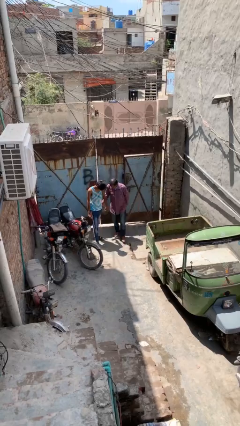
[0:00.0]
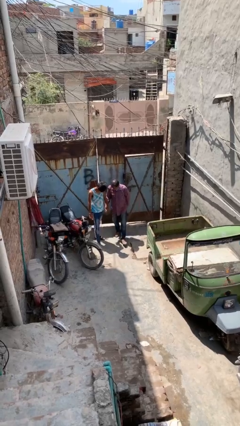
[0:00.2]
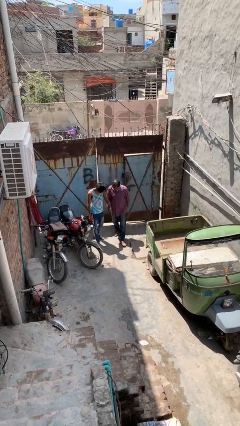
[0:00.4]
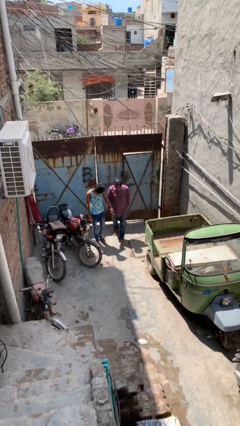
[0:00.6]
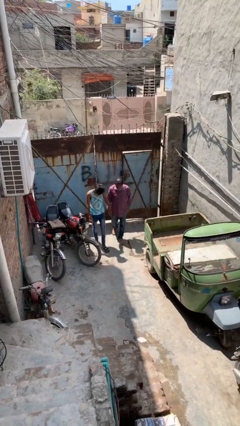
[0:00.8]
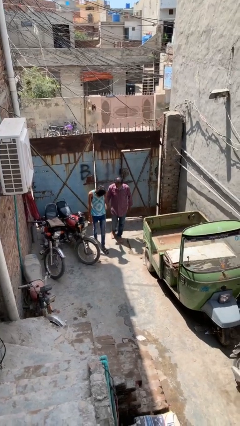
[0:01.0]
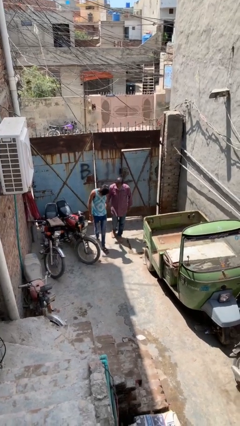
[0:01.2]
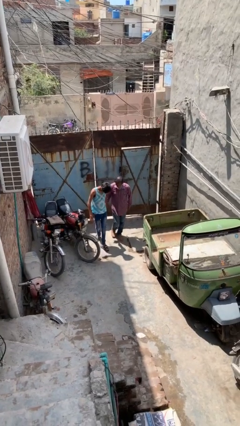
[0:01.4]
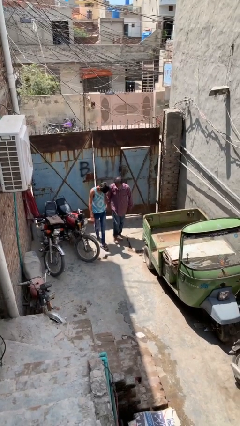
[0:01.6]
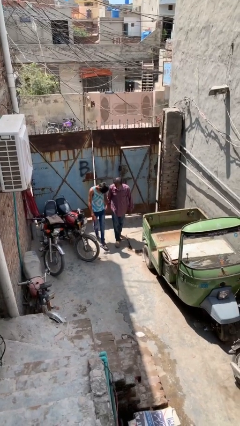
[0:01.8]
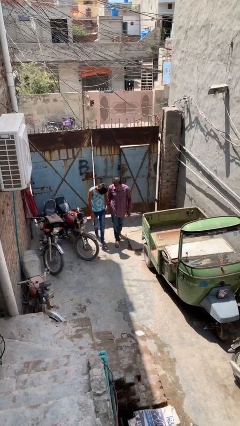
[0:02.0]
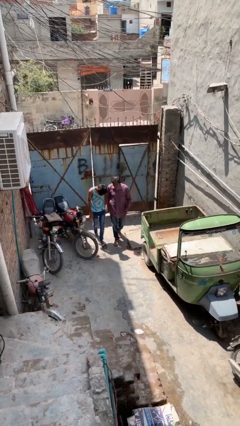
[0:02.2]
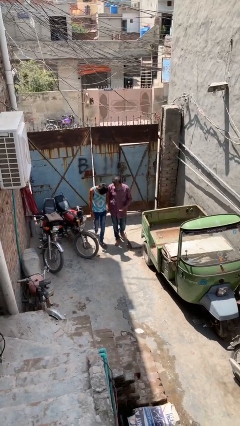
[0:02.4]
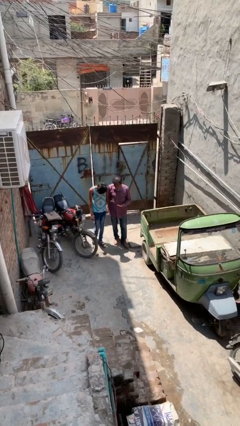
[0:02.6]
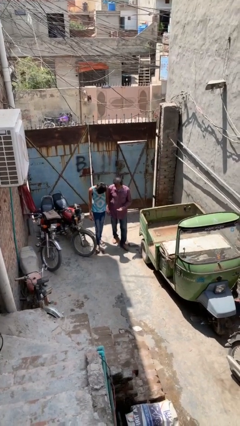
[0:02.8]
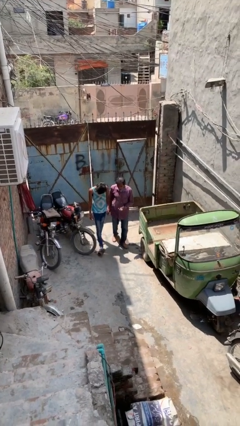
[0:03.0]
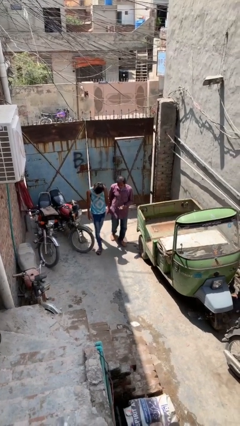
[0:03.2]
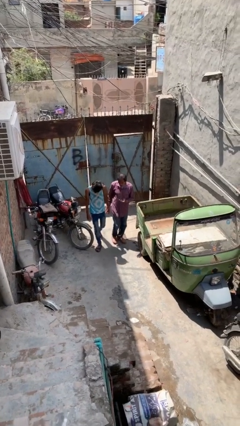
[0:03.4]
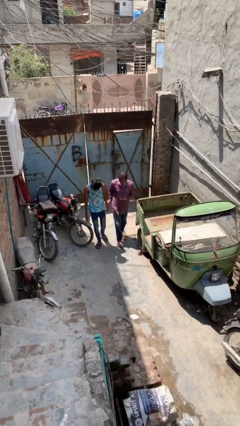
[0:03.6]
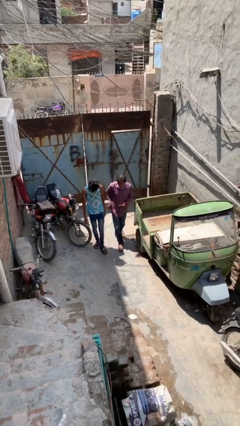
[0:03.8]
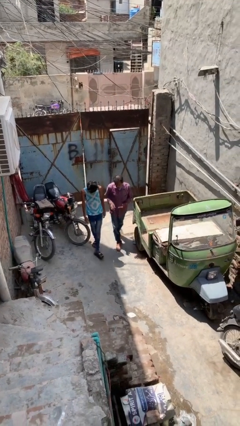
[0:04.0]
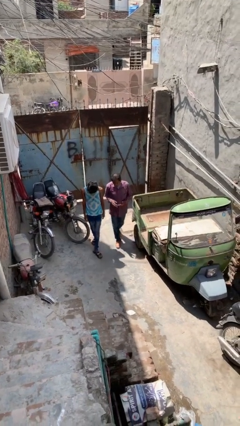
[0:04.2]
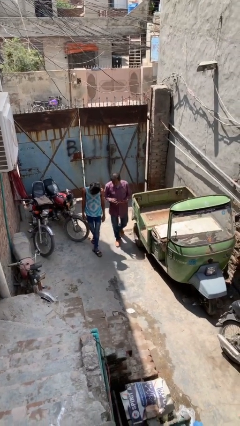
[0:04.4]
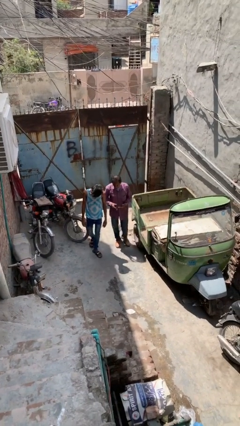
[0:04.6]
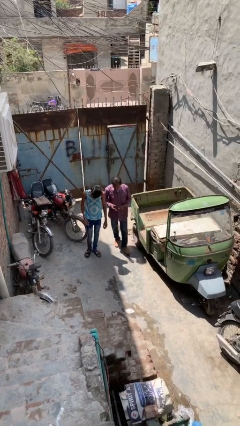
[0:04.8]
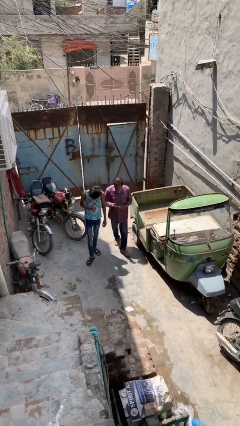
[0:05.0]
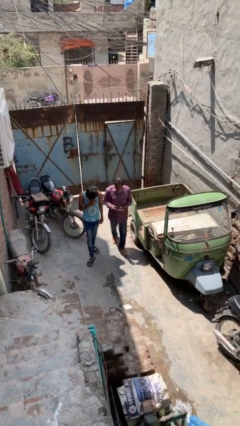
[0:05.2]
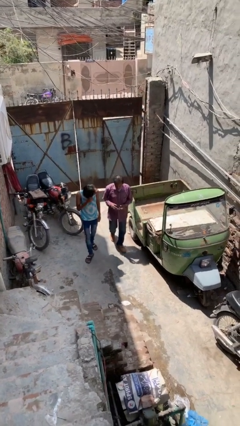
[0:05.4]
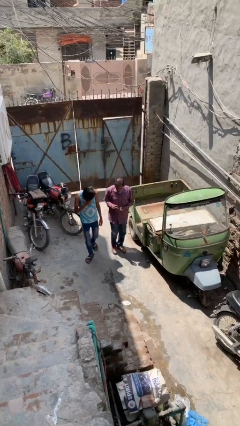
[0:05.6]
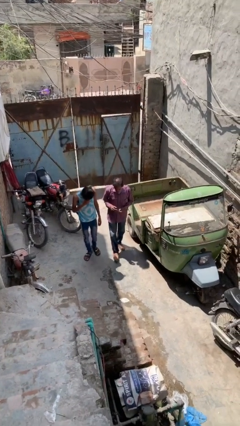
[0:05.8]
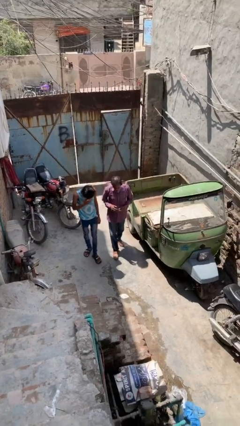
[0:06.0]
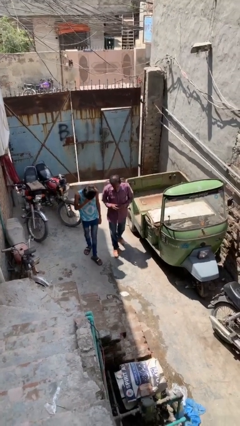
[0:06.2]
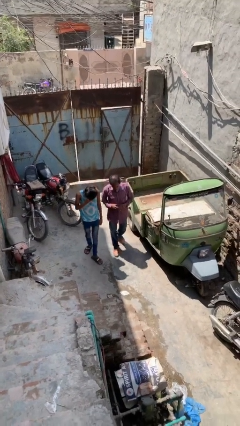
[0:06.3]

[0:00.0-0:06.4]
person holds hand

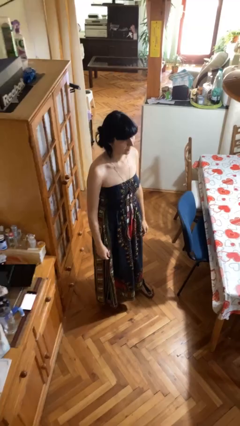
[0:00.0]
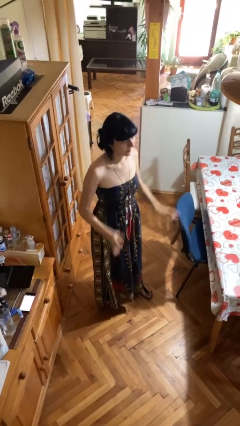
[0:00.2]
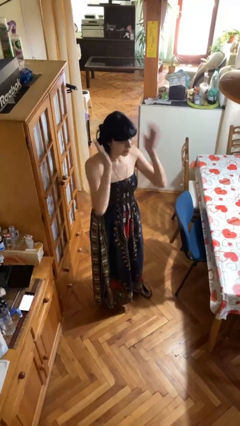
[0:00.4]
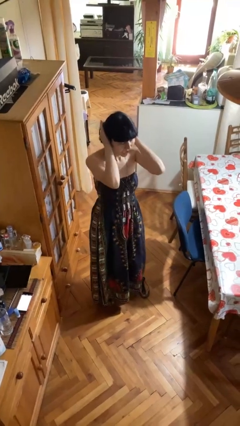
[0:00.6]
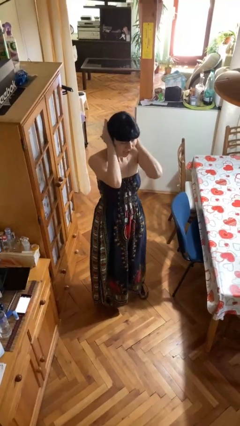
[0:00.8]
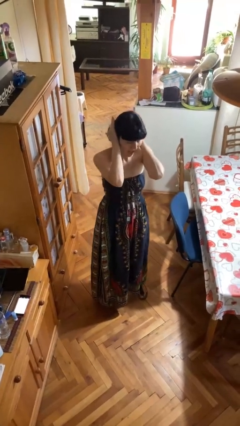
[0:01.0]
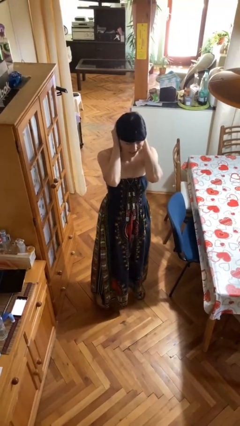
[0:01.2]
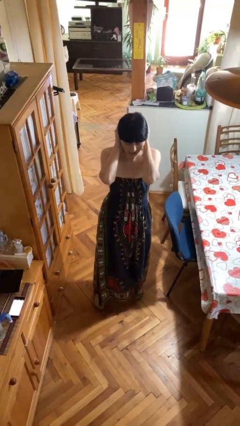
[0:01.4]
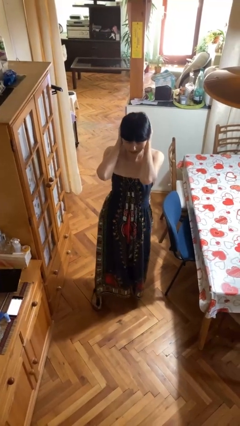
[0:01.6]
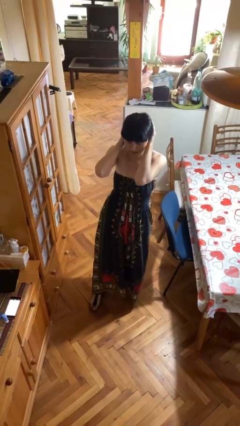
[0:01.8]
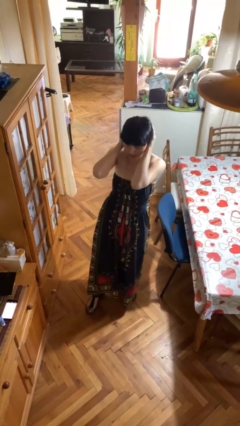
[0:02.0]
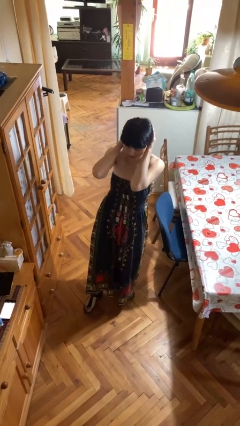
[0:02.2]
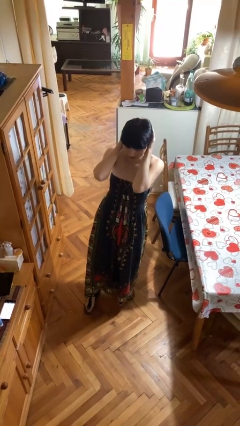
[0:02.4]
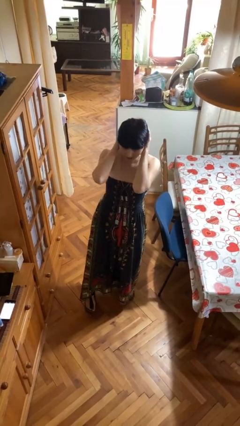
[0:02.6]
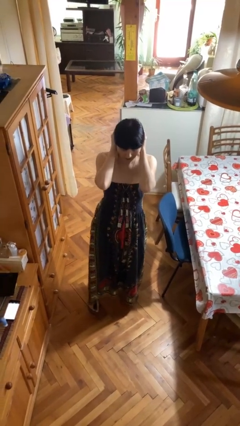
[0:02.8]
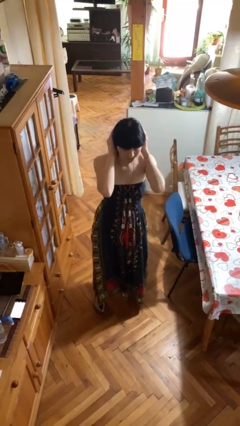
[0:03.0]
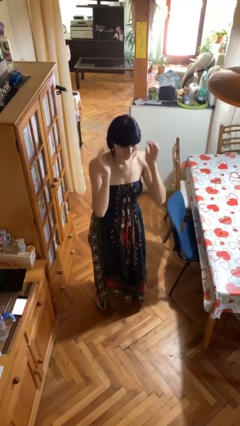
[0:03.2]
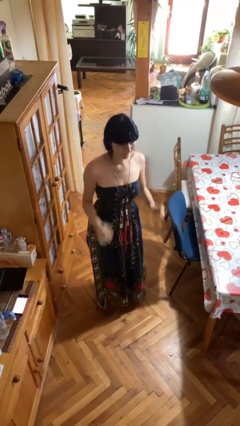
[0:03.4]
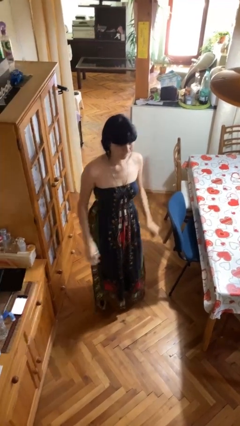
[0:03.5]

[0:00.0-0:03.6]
person puts fingers in ear

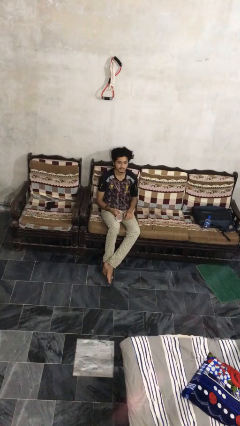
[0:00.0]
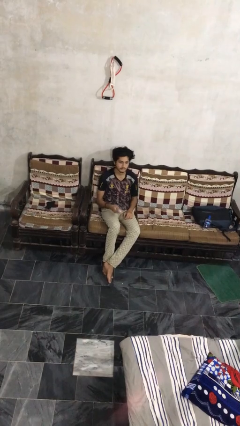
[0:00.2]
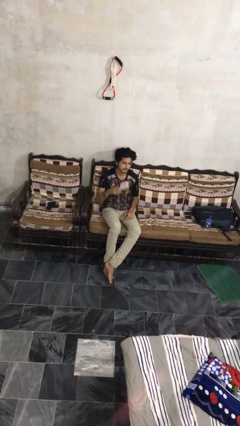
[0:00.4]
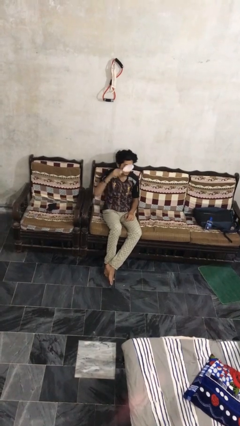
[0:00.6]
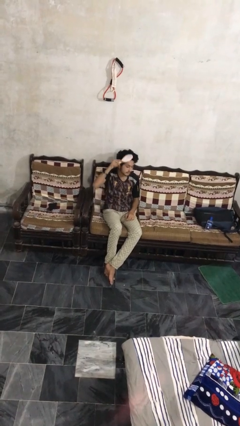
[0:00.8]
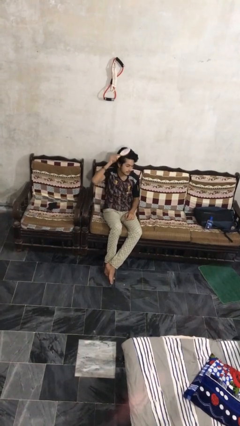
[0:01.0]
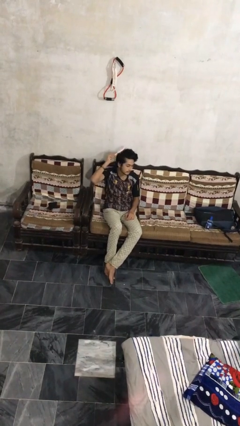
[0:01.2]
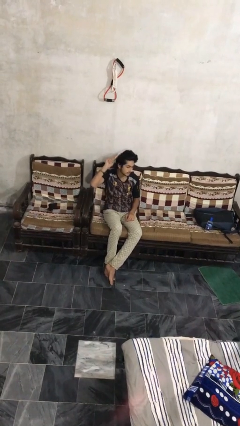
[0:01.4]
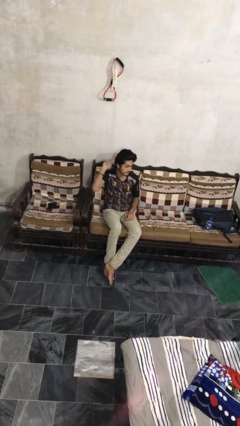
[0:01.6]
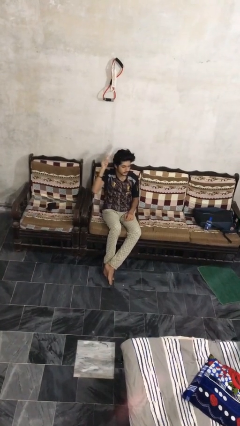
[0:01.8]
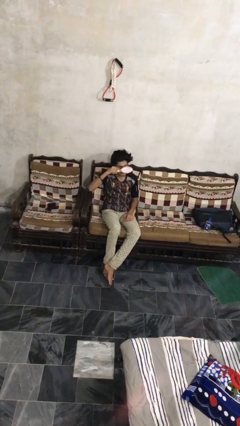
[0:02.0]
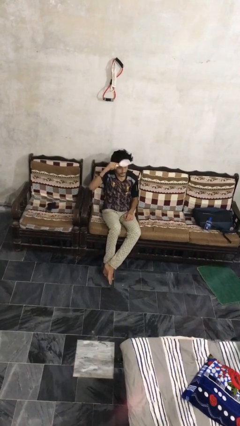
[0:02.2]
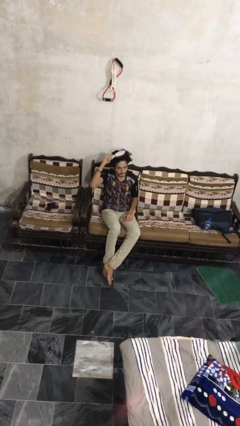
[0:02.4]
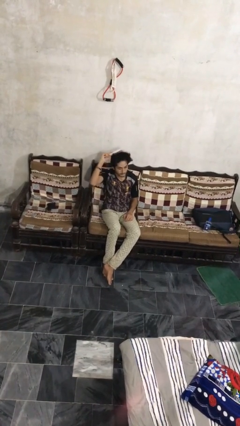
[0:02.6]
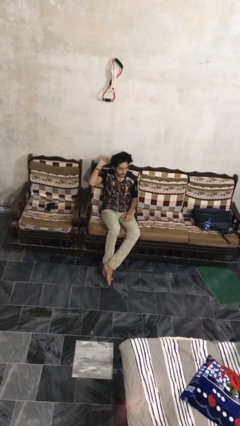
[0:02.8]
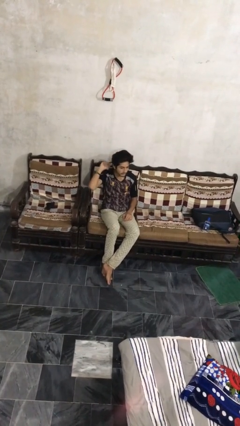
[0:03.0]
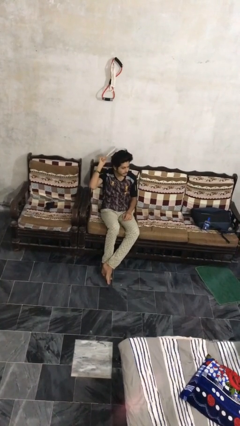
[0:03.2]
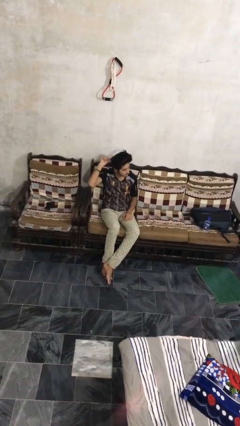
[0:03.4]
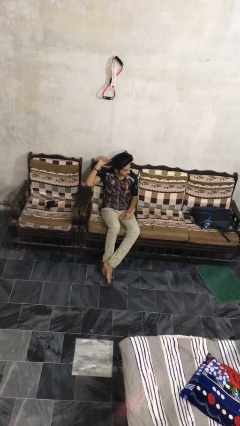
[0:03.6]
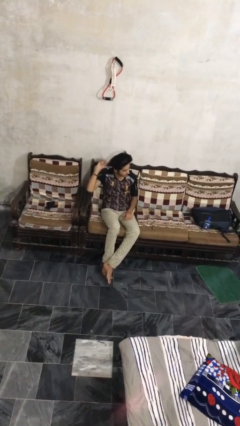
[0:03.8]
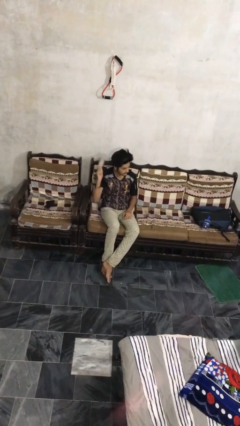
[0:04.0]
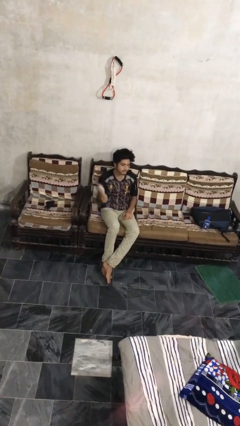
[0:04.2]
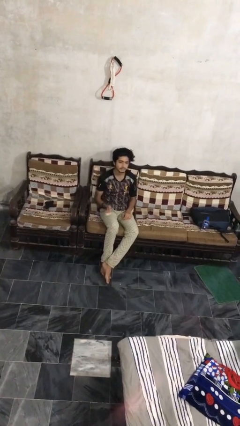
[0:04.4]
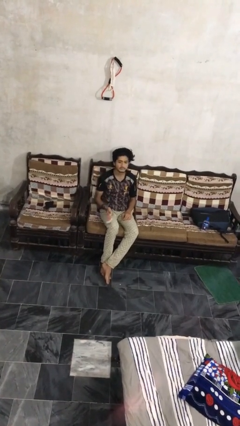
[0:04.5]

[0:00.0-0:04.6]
person brushes hair

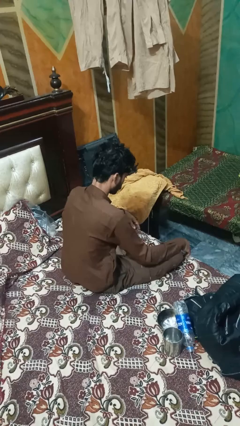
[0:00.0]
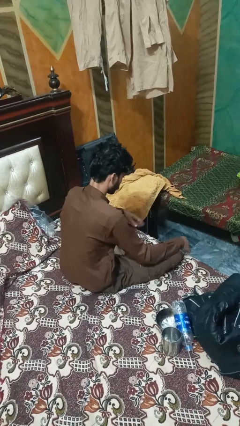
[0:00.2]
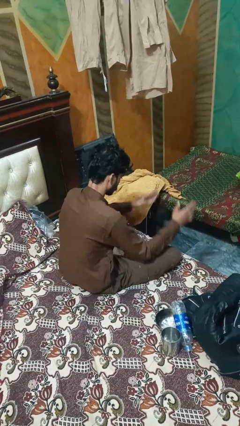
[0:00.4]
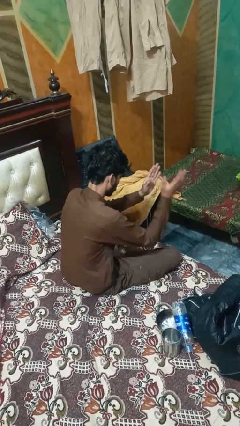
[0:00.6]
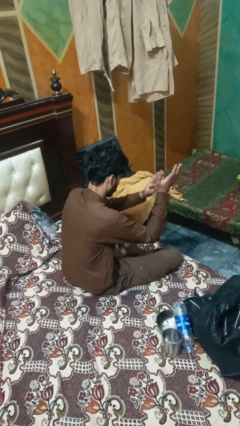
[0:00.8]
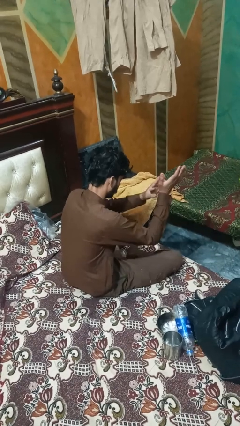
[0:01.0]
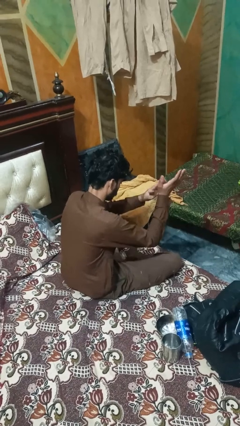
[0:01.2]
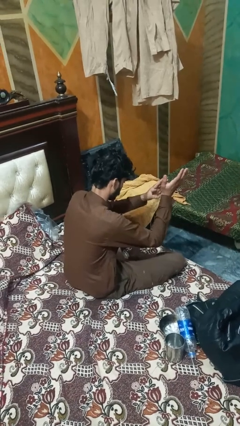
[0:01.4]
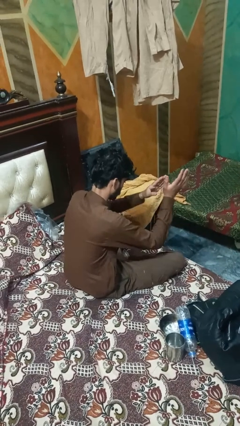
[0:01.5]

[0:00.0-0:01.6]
person claps hands

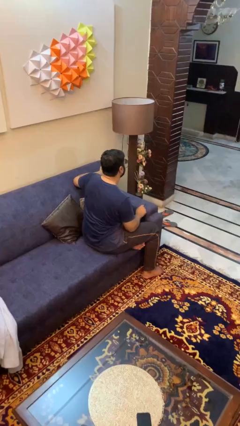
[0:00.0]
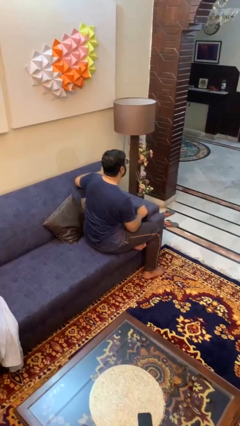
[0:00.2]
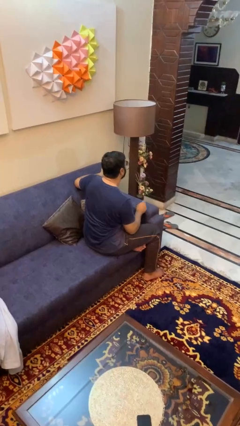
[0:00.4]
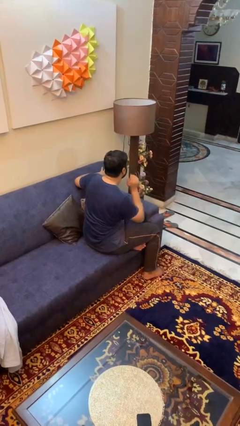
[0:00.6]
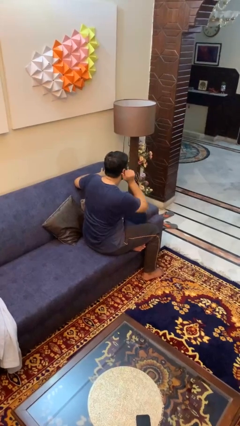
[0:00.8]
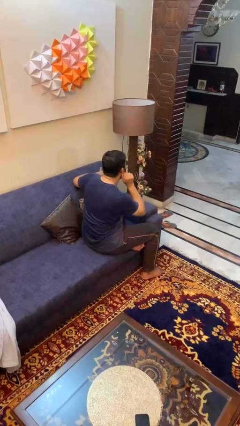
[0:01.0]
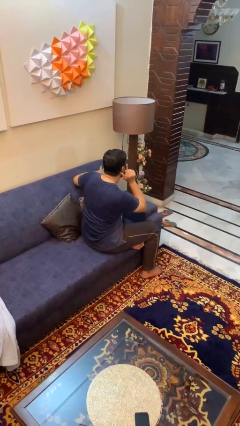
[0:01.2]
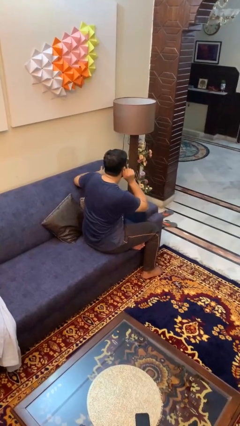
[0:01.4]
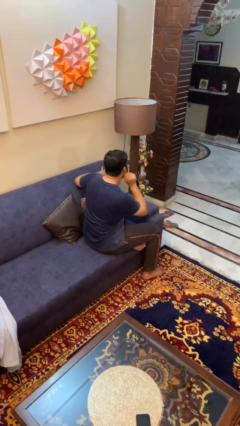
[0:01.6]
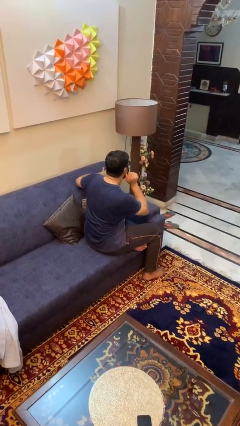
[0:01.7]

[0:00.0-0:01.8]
person touches earlobe
